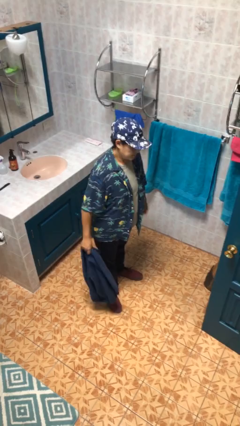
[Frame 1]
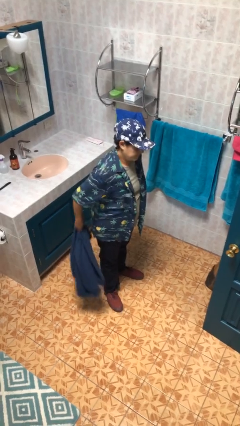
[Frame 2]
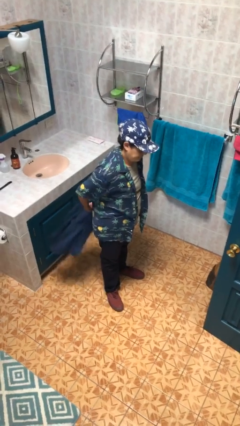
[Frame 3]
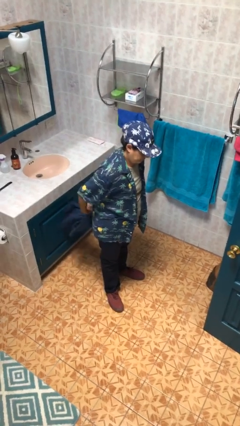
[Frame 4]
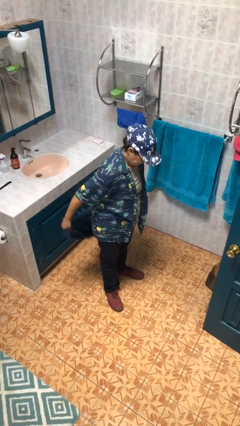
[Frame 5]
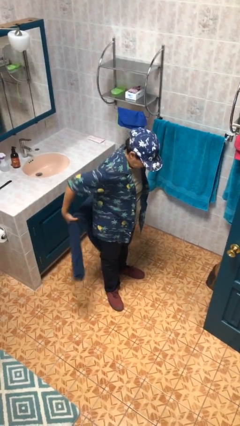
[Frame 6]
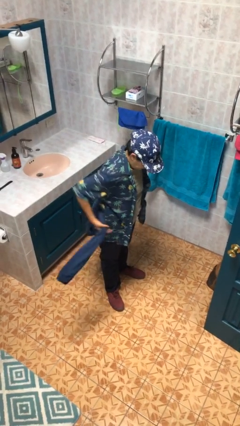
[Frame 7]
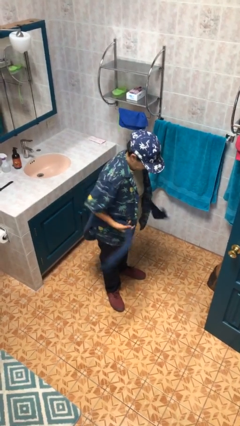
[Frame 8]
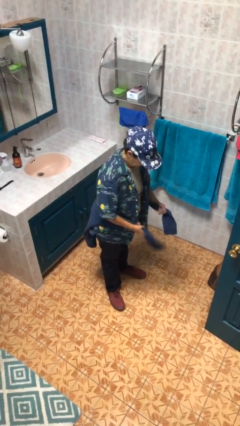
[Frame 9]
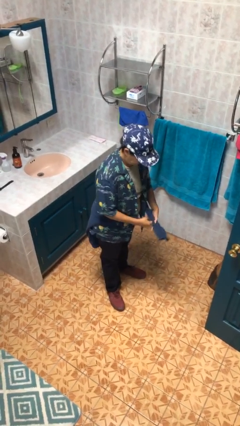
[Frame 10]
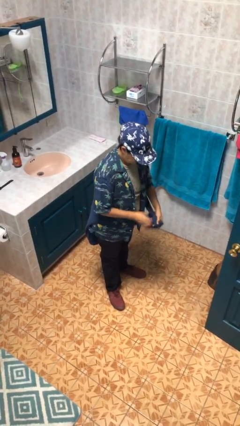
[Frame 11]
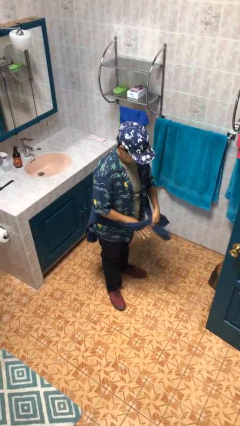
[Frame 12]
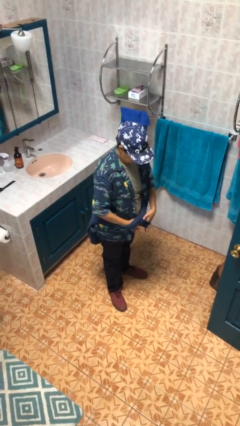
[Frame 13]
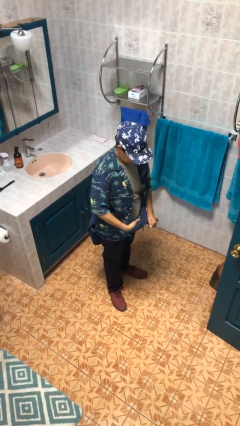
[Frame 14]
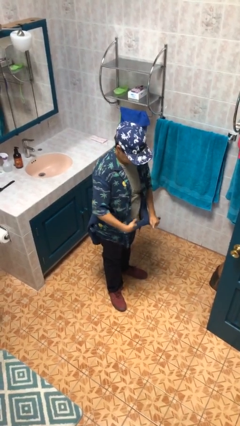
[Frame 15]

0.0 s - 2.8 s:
person ties jacket around waist

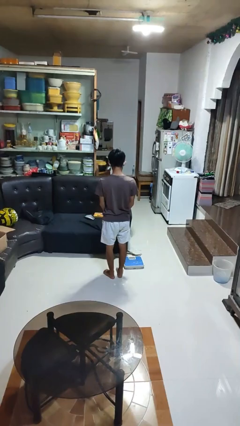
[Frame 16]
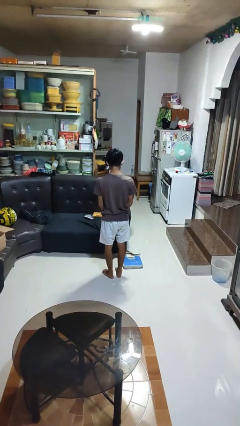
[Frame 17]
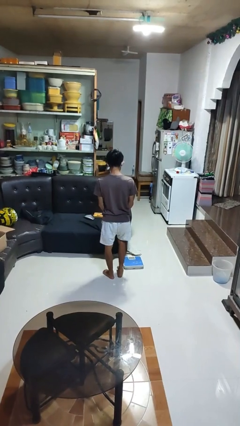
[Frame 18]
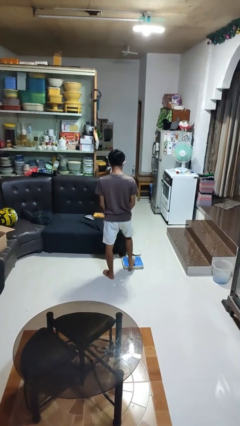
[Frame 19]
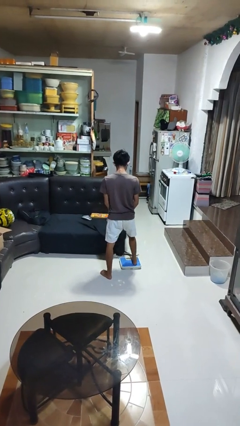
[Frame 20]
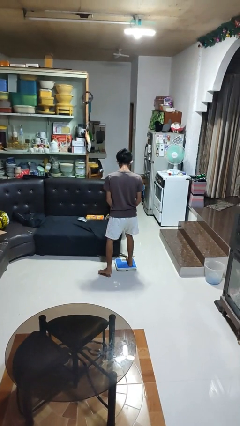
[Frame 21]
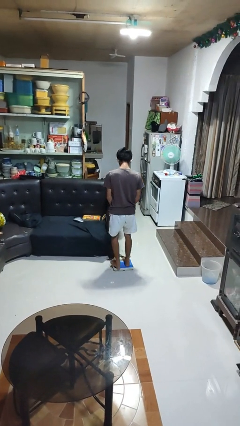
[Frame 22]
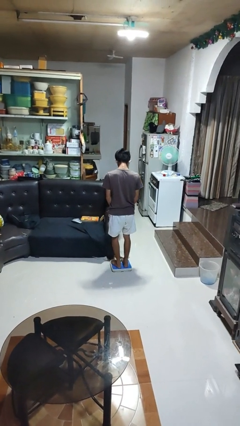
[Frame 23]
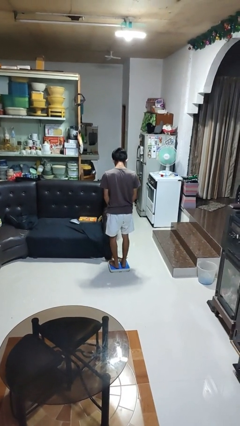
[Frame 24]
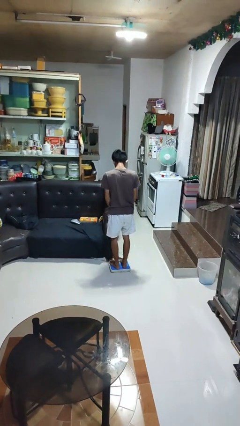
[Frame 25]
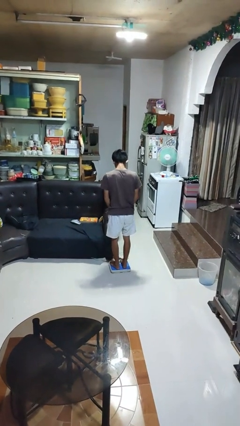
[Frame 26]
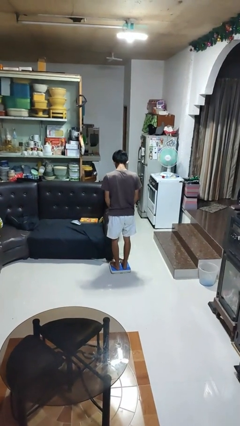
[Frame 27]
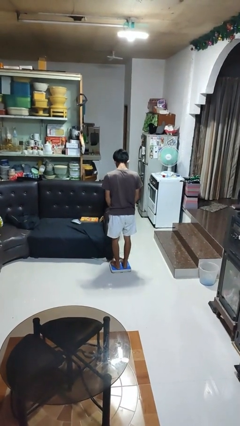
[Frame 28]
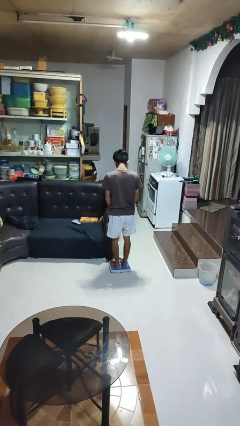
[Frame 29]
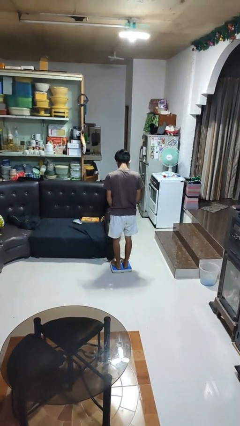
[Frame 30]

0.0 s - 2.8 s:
person uses bodyweight scale

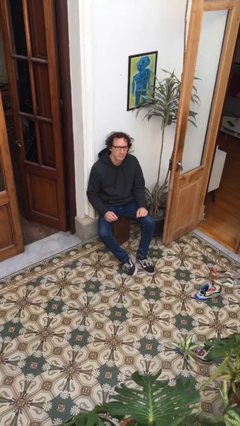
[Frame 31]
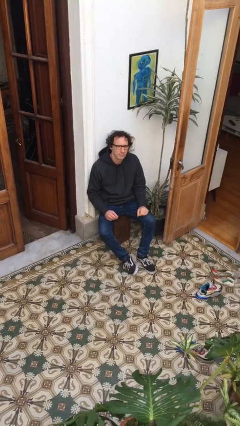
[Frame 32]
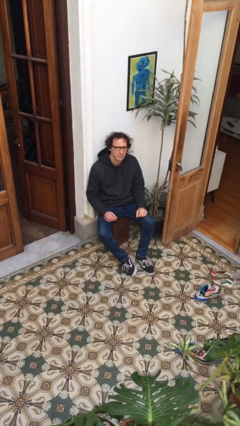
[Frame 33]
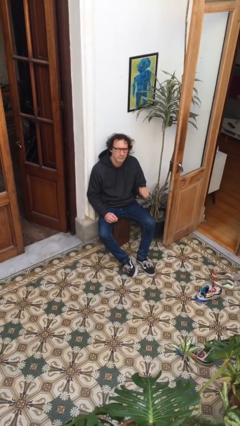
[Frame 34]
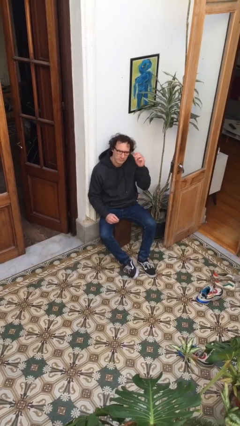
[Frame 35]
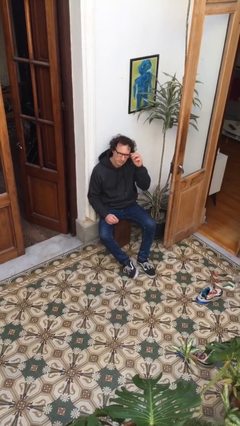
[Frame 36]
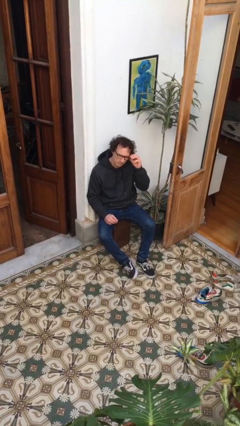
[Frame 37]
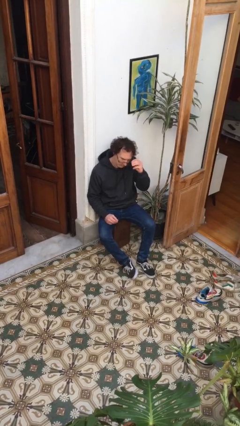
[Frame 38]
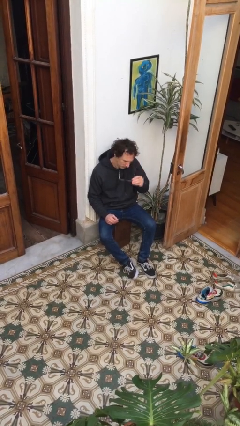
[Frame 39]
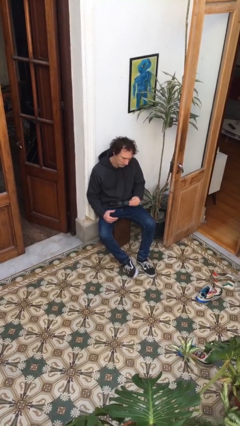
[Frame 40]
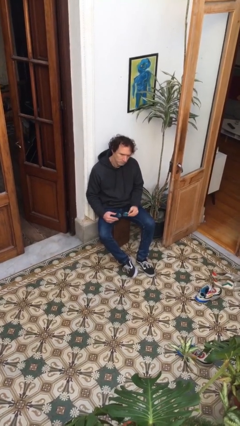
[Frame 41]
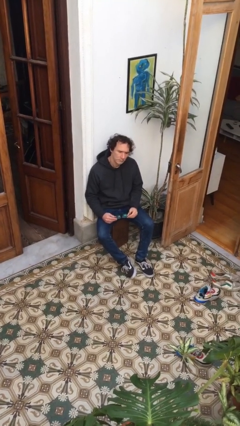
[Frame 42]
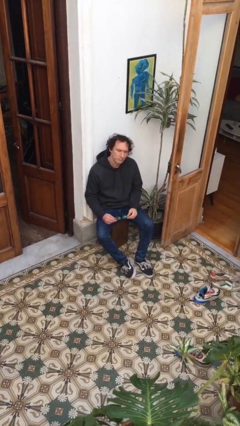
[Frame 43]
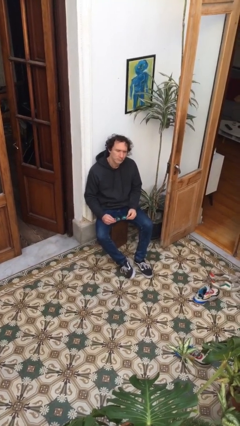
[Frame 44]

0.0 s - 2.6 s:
person takes off glasses

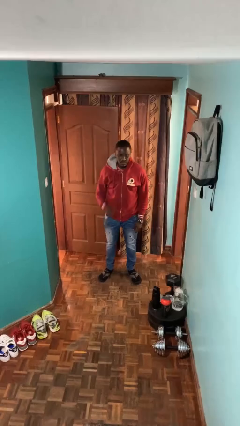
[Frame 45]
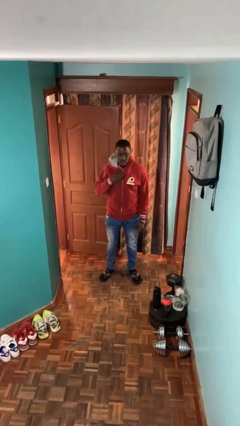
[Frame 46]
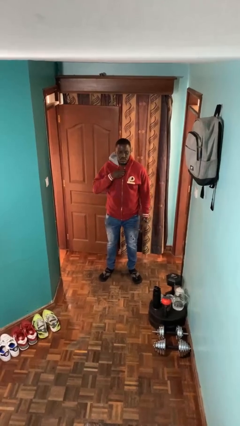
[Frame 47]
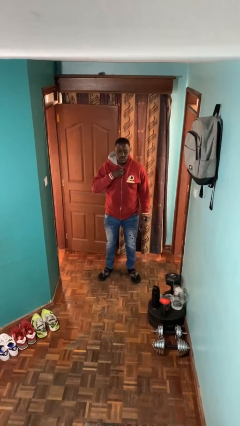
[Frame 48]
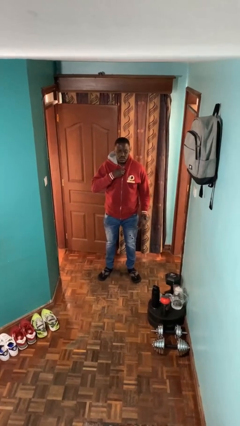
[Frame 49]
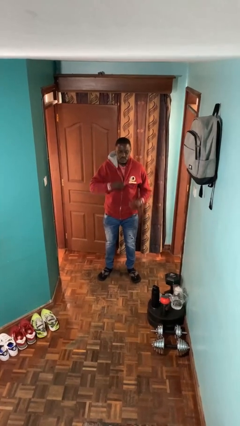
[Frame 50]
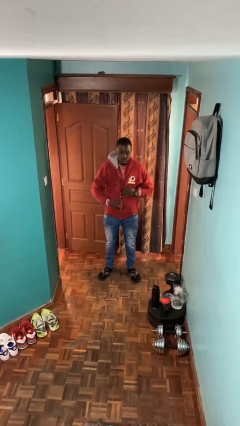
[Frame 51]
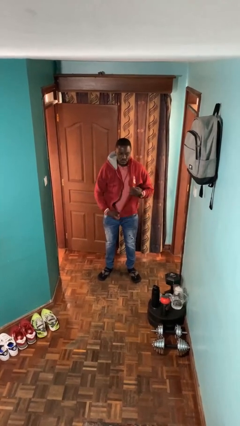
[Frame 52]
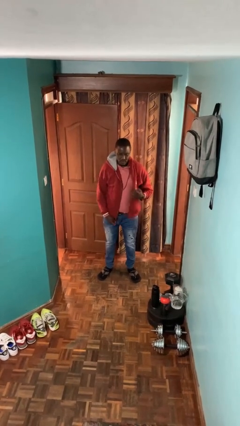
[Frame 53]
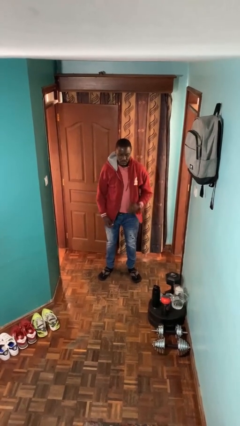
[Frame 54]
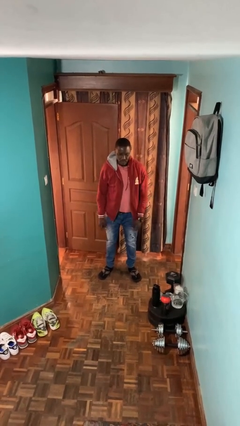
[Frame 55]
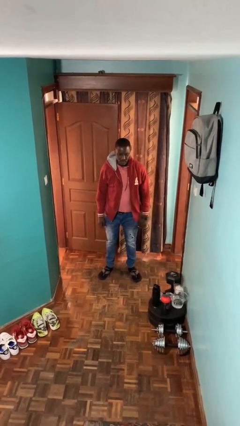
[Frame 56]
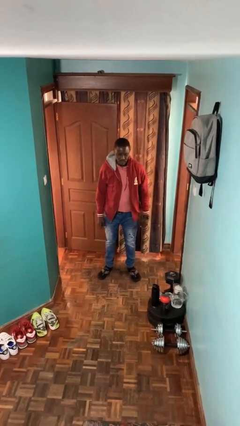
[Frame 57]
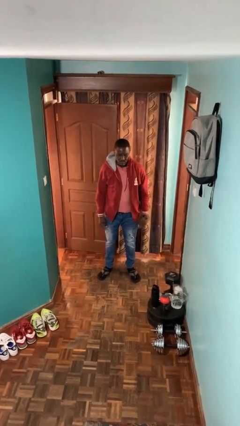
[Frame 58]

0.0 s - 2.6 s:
person unzips jacket

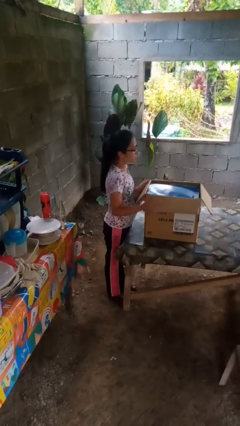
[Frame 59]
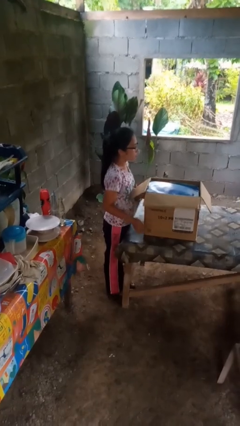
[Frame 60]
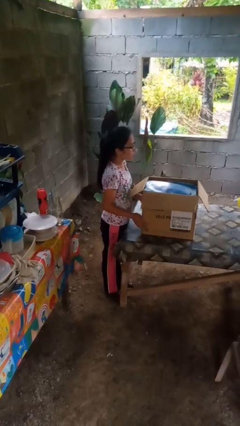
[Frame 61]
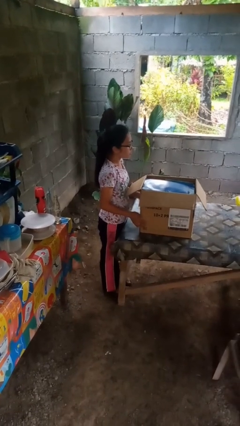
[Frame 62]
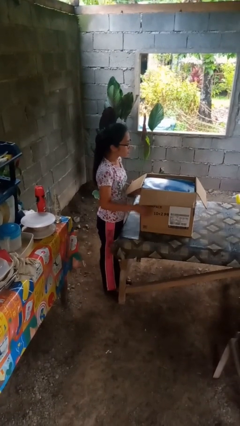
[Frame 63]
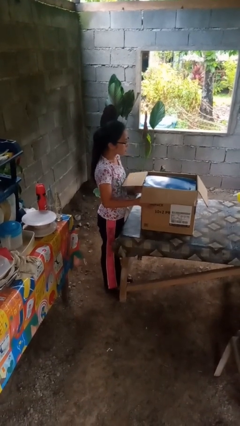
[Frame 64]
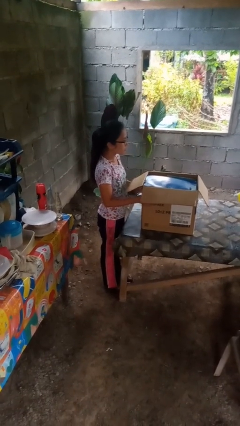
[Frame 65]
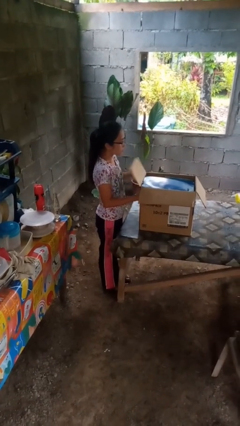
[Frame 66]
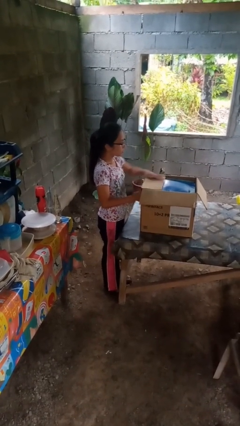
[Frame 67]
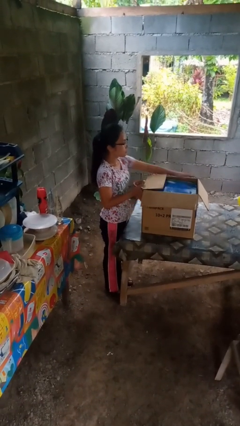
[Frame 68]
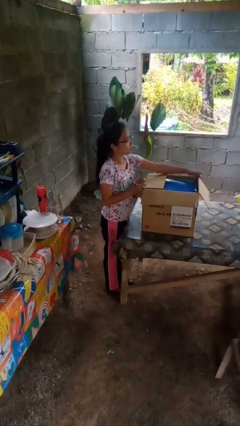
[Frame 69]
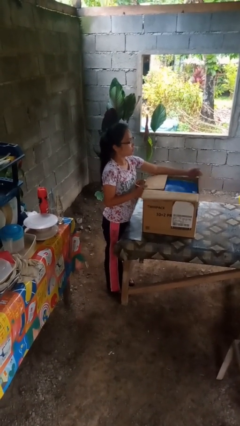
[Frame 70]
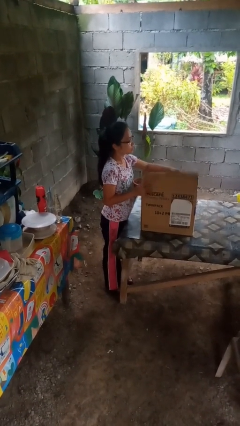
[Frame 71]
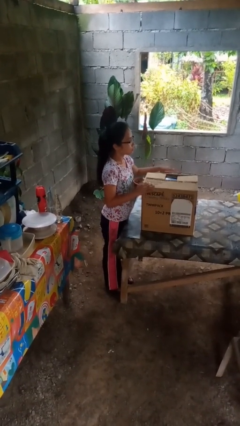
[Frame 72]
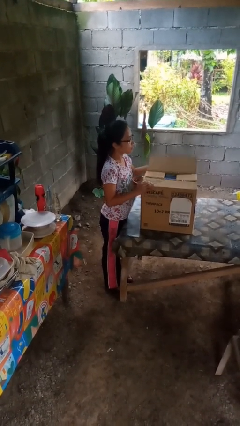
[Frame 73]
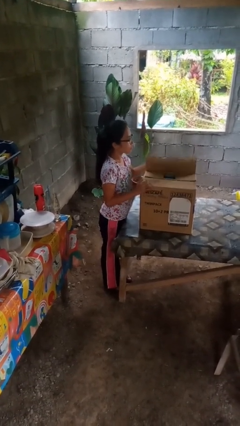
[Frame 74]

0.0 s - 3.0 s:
person closes box

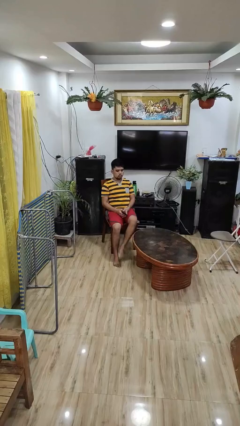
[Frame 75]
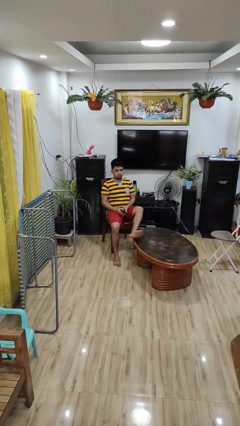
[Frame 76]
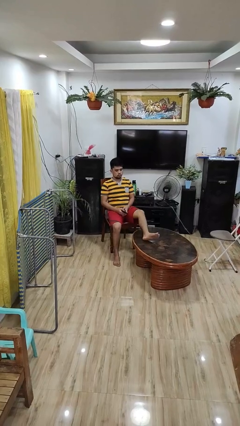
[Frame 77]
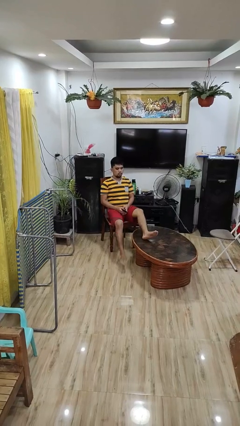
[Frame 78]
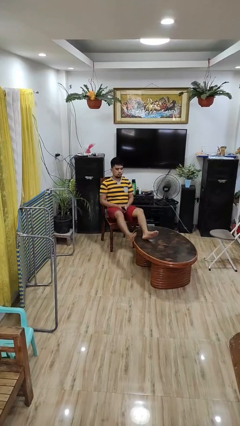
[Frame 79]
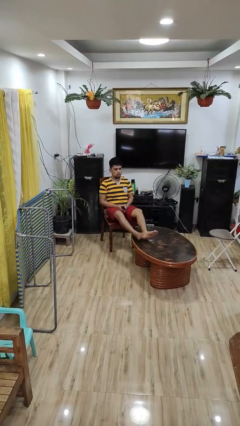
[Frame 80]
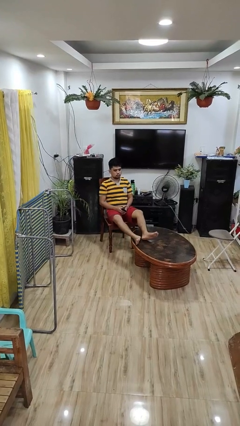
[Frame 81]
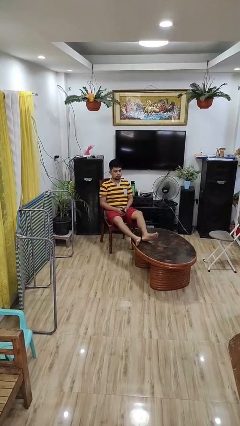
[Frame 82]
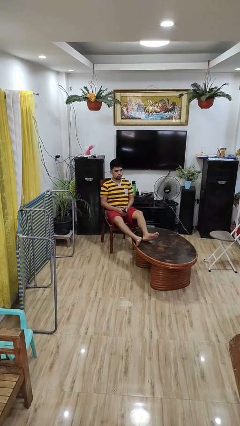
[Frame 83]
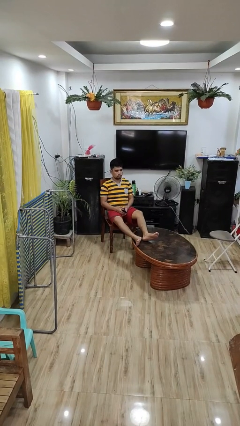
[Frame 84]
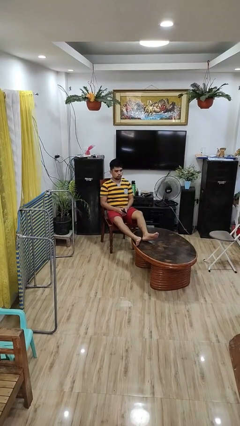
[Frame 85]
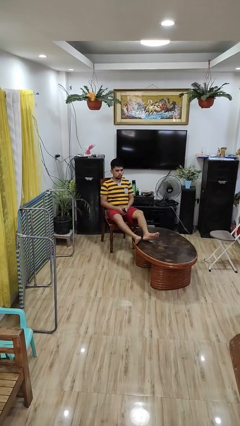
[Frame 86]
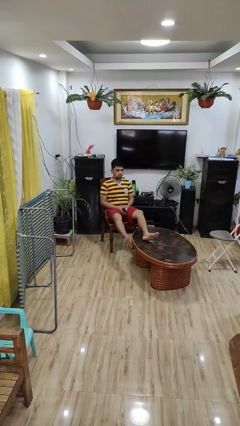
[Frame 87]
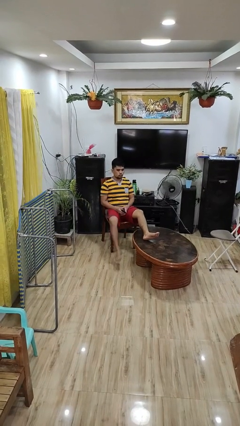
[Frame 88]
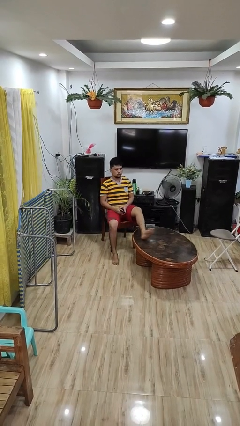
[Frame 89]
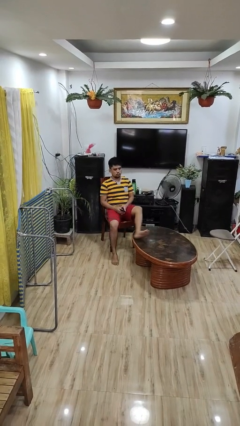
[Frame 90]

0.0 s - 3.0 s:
person puts feet up

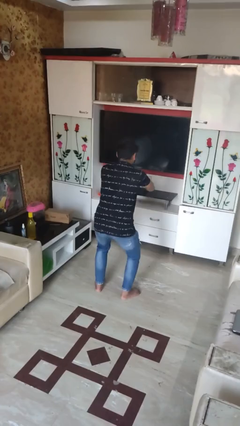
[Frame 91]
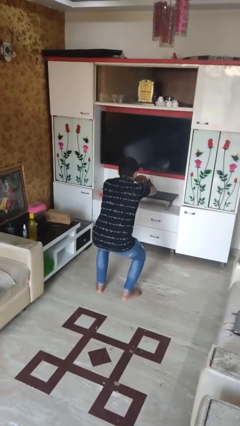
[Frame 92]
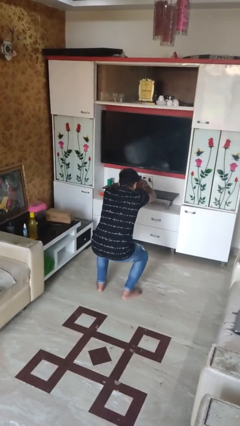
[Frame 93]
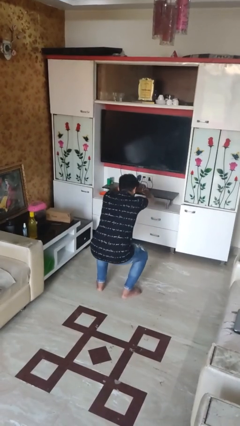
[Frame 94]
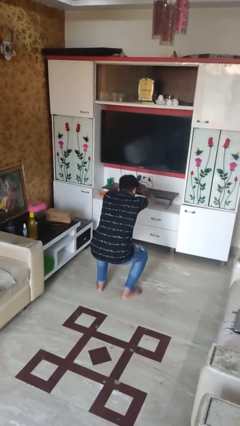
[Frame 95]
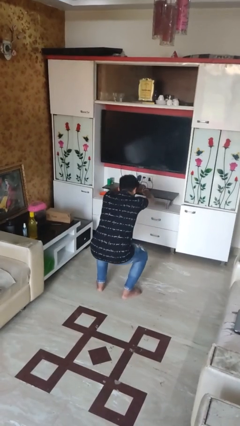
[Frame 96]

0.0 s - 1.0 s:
person squats
